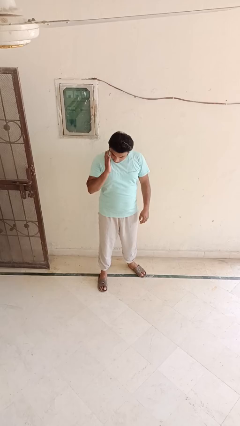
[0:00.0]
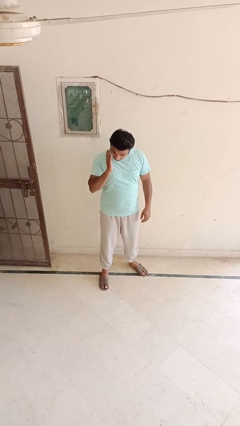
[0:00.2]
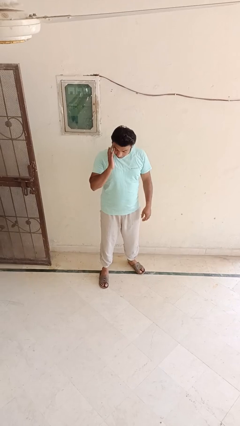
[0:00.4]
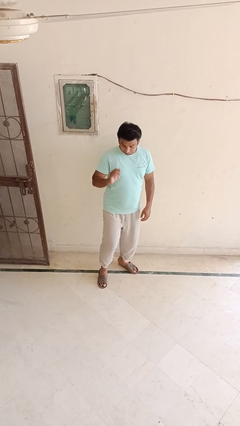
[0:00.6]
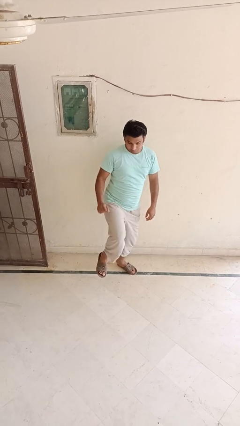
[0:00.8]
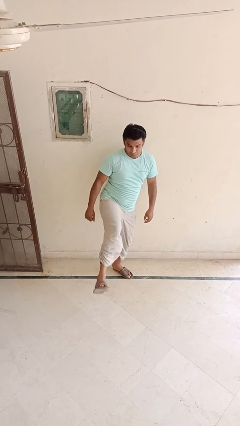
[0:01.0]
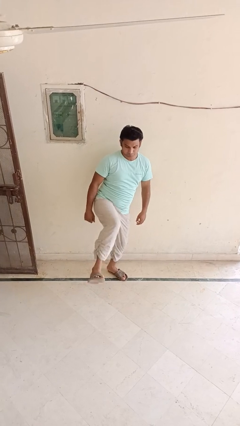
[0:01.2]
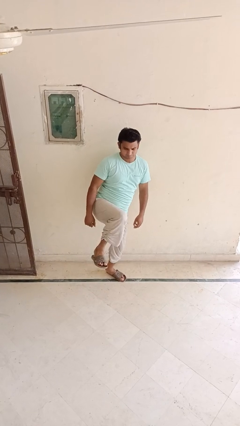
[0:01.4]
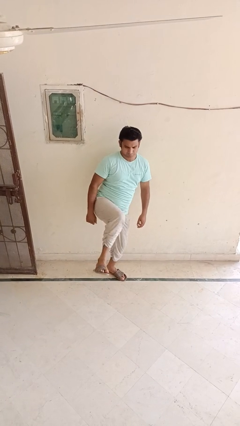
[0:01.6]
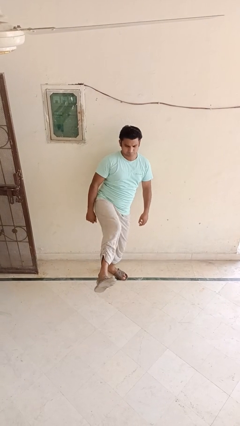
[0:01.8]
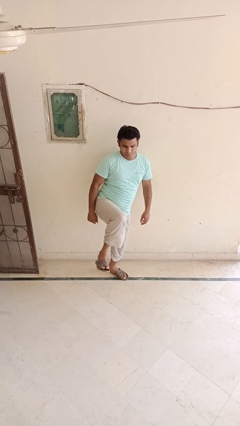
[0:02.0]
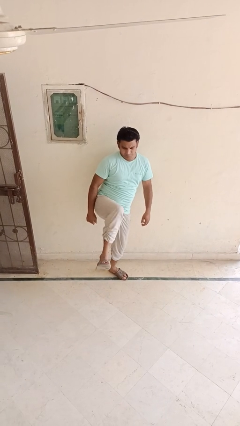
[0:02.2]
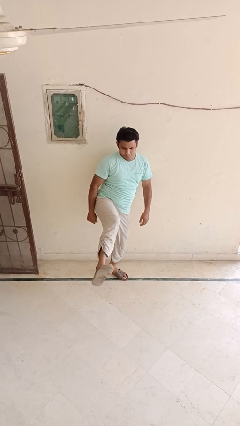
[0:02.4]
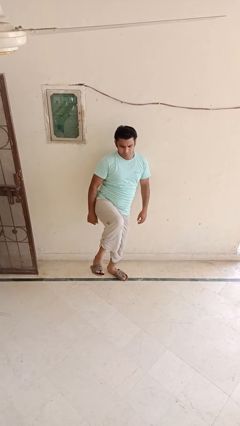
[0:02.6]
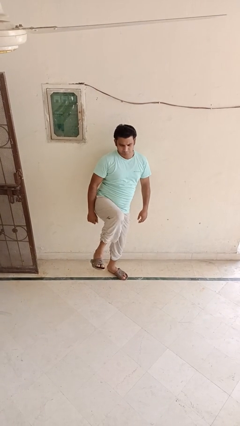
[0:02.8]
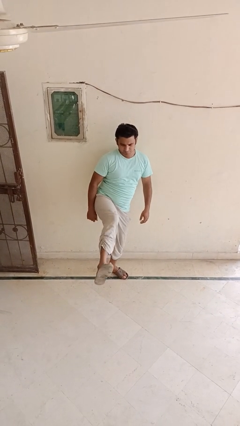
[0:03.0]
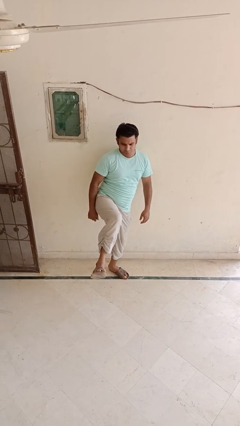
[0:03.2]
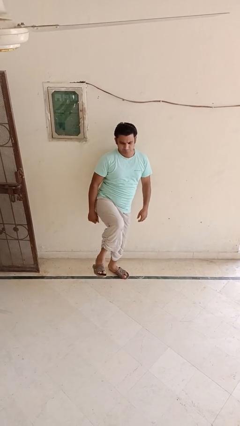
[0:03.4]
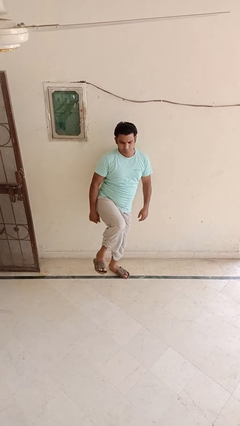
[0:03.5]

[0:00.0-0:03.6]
person karate kicks

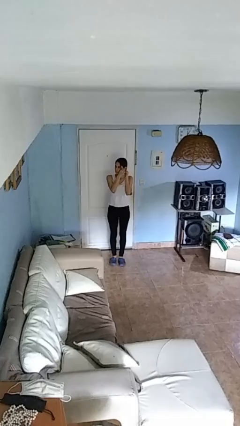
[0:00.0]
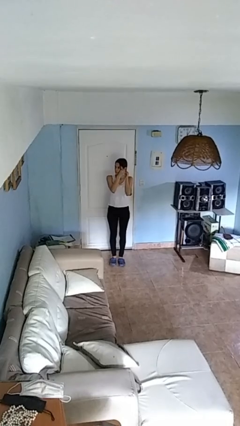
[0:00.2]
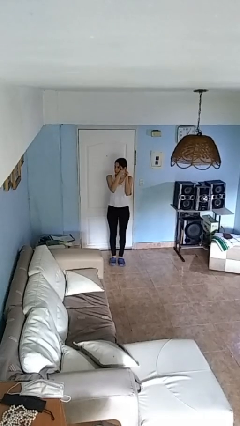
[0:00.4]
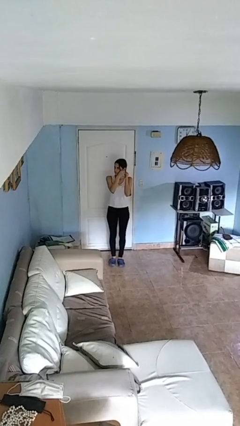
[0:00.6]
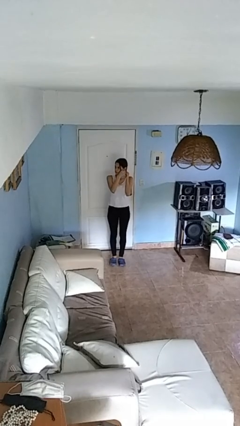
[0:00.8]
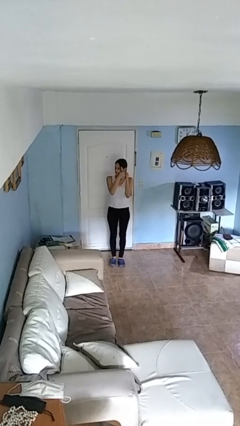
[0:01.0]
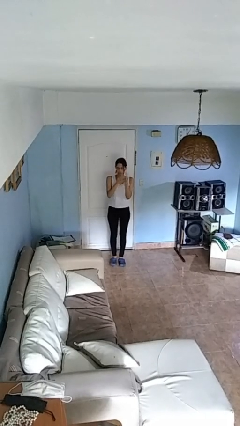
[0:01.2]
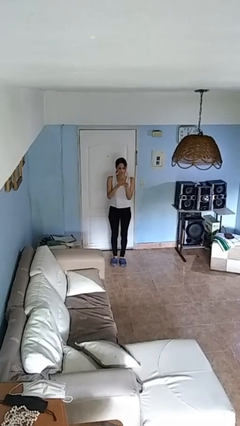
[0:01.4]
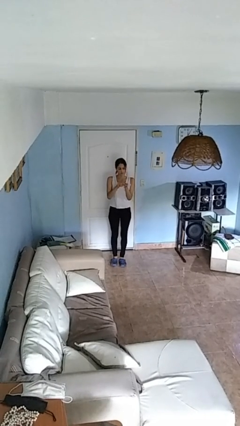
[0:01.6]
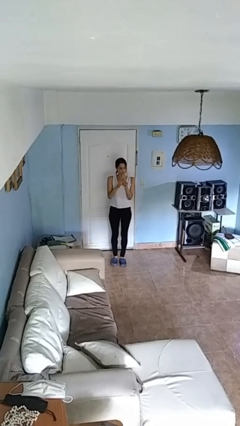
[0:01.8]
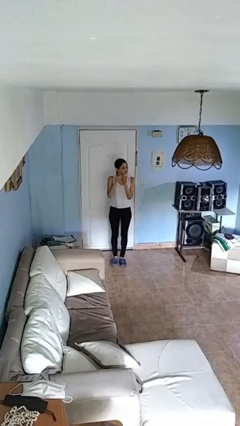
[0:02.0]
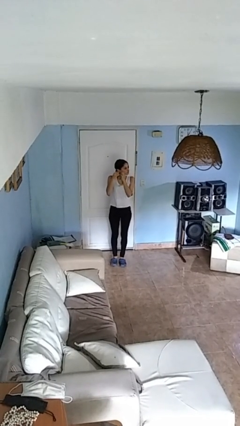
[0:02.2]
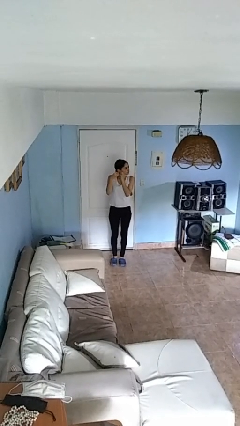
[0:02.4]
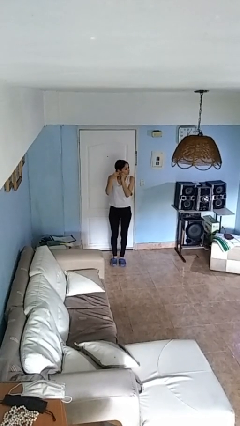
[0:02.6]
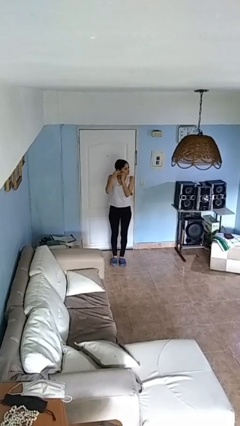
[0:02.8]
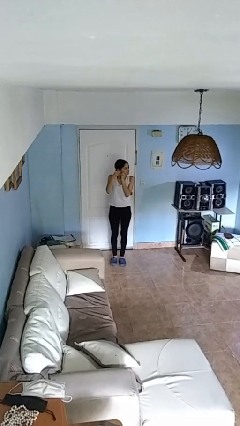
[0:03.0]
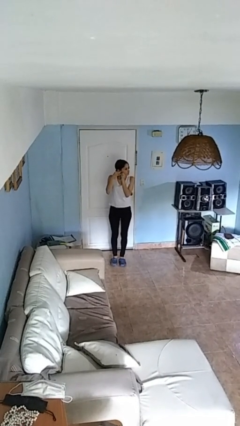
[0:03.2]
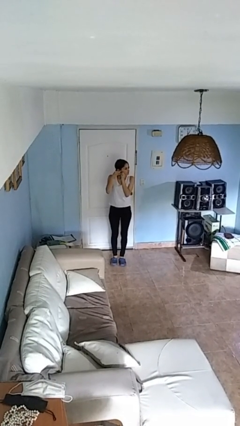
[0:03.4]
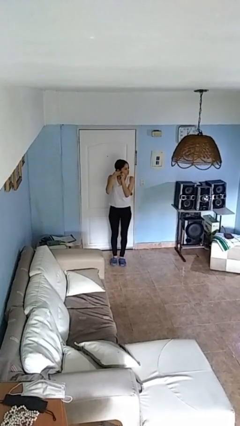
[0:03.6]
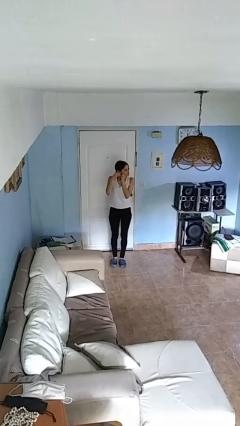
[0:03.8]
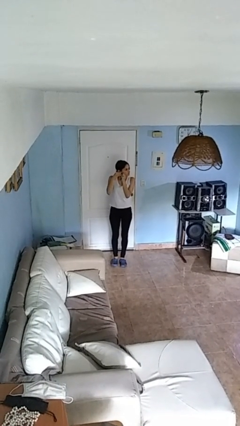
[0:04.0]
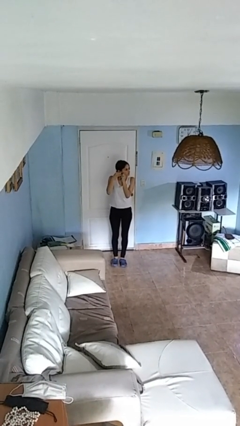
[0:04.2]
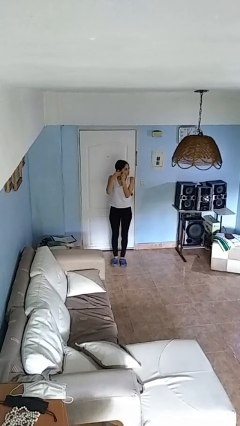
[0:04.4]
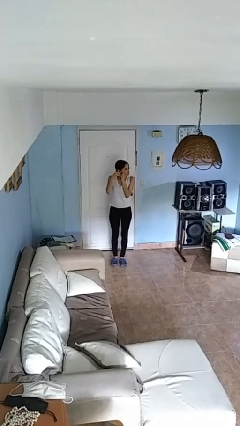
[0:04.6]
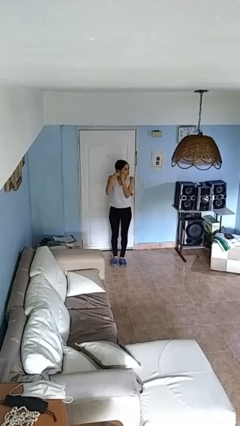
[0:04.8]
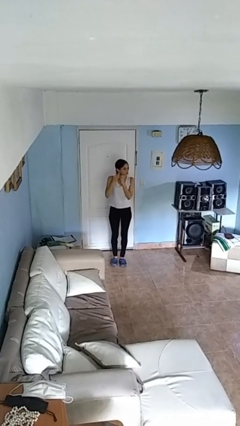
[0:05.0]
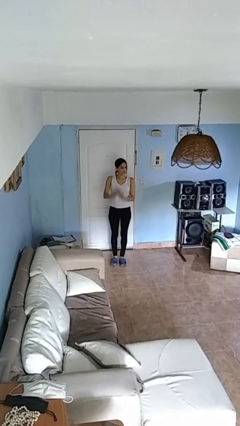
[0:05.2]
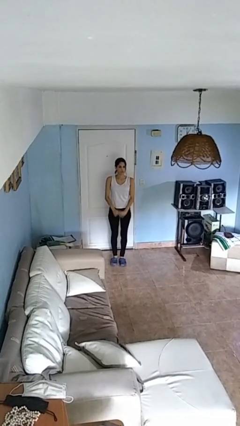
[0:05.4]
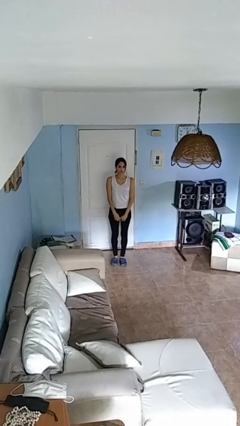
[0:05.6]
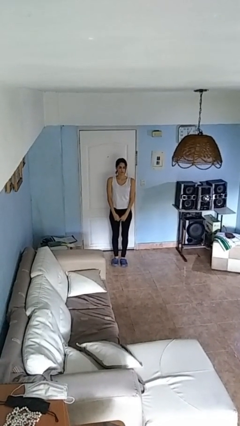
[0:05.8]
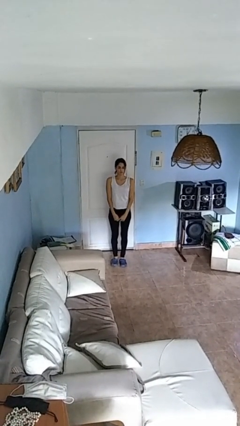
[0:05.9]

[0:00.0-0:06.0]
person puts on earrings

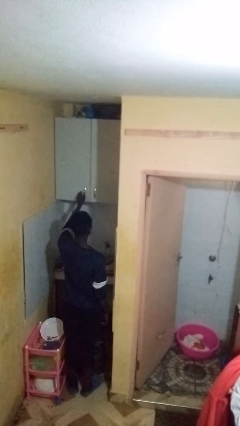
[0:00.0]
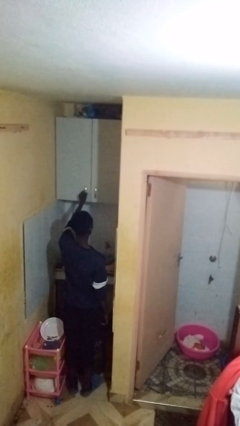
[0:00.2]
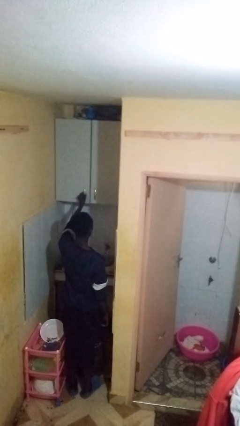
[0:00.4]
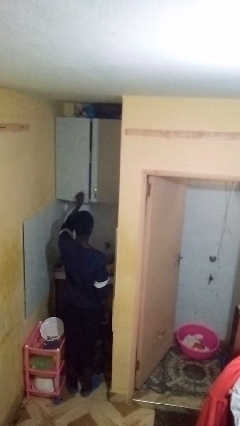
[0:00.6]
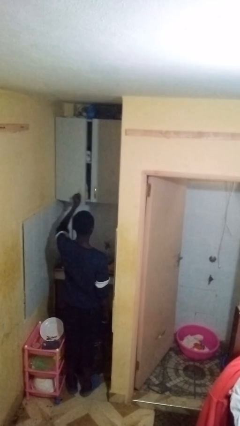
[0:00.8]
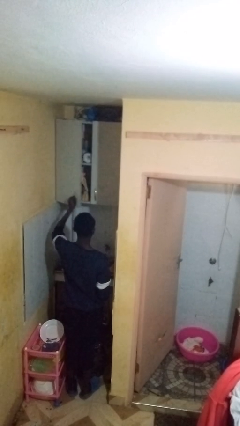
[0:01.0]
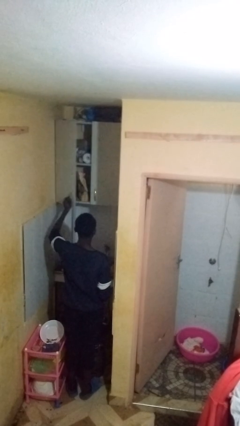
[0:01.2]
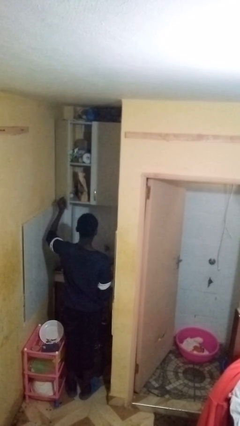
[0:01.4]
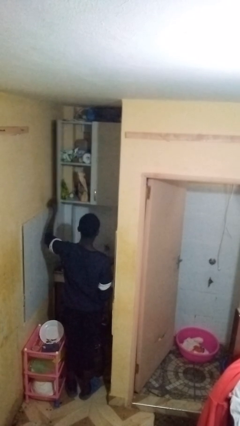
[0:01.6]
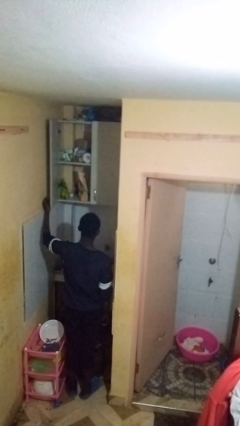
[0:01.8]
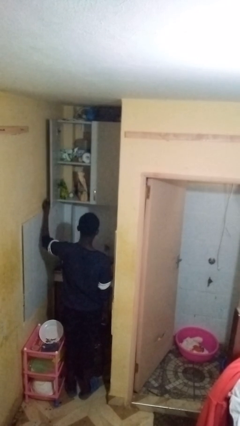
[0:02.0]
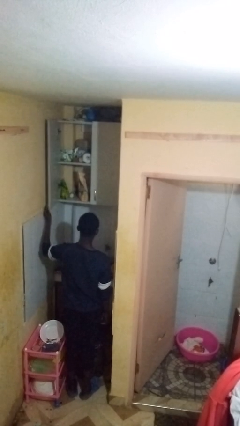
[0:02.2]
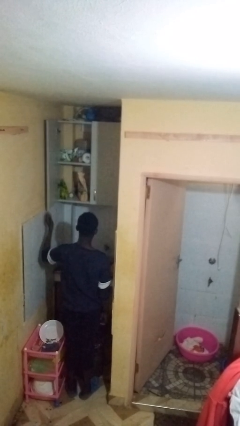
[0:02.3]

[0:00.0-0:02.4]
person opens cabinet

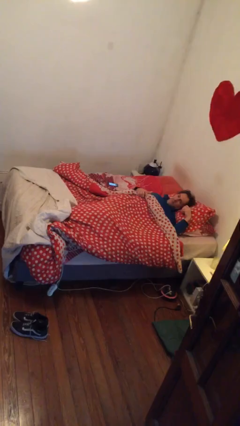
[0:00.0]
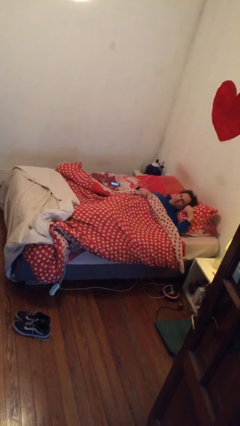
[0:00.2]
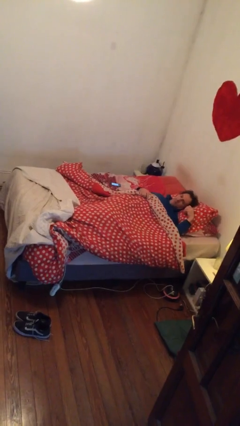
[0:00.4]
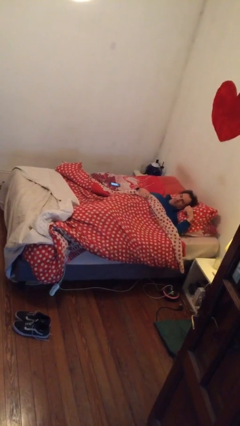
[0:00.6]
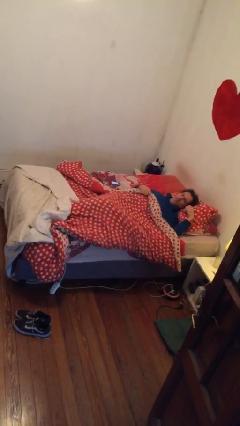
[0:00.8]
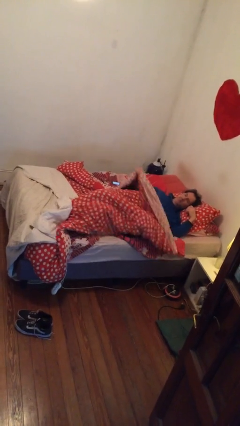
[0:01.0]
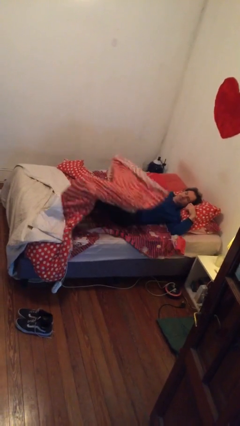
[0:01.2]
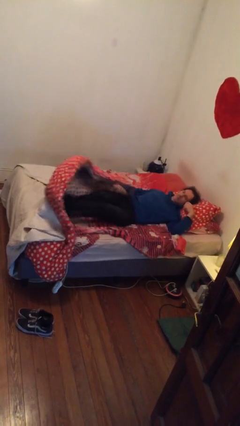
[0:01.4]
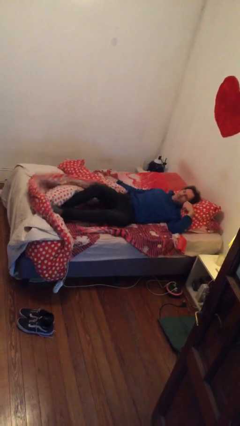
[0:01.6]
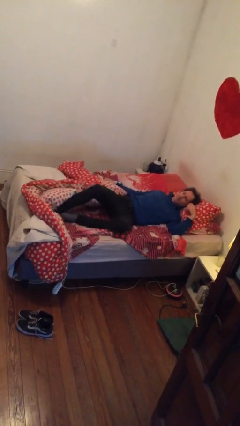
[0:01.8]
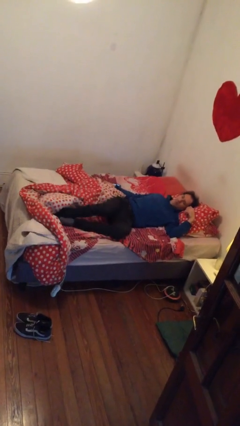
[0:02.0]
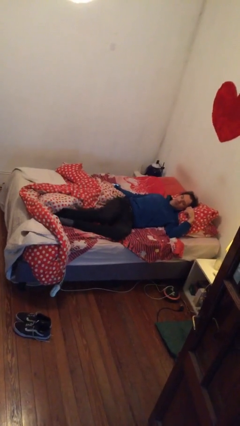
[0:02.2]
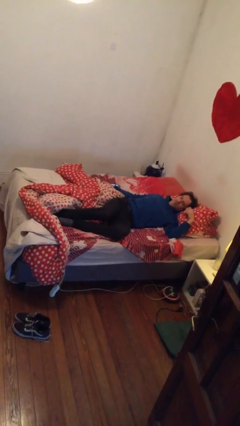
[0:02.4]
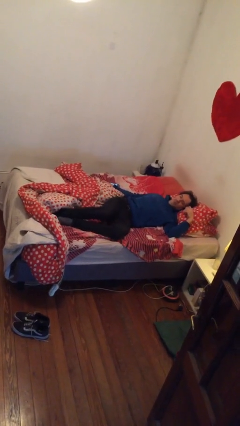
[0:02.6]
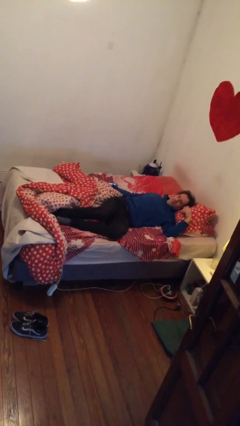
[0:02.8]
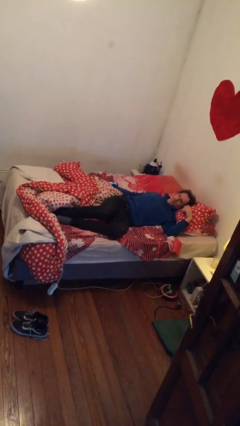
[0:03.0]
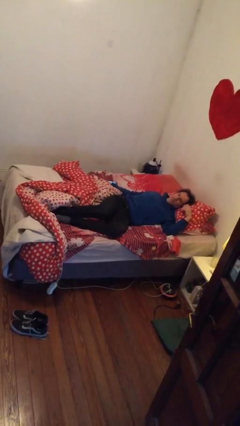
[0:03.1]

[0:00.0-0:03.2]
person uncovers with bedsheets

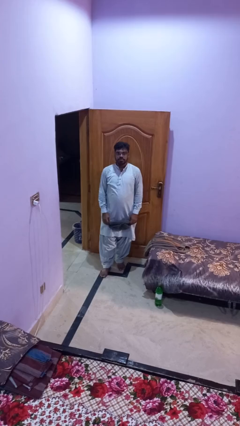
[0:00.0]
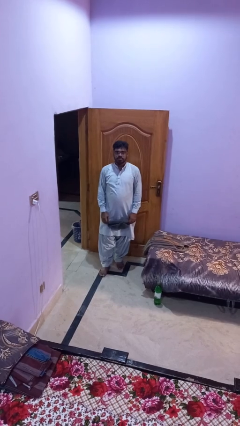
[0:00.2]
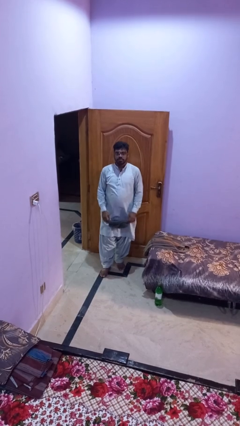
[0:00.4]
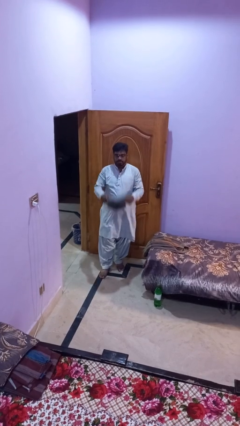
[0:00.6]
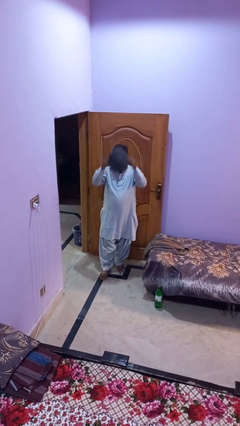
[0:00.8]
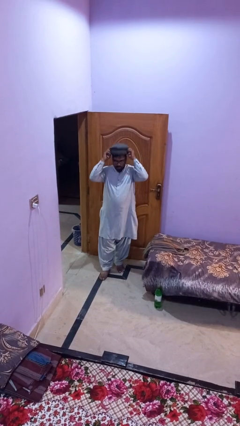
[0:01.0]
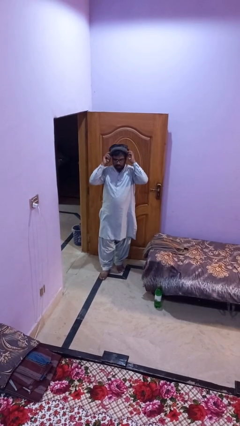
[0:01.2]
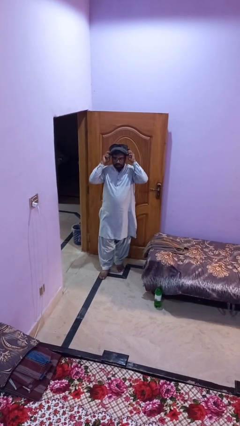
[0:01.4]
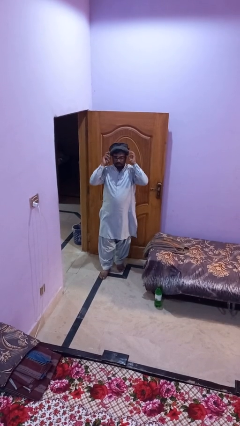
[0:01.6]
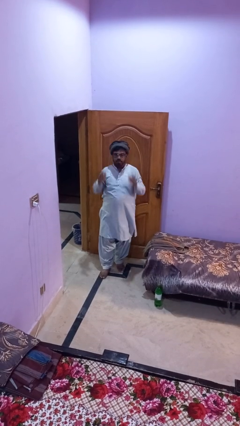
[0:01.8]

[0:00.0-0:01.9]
person puts on hat

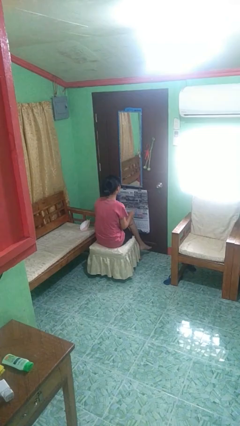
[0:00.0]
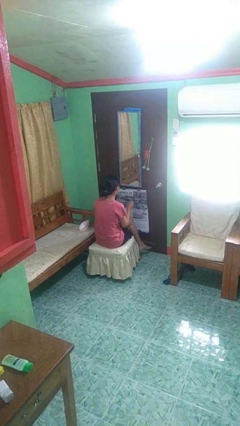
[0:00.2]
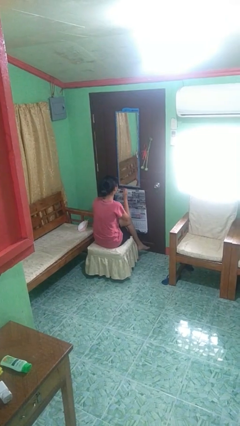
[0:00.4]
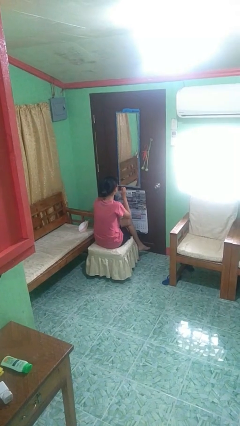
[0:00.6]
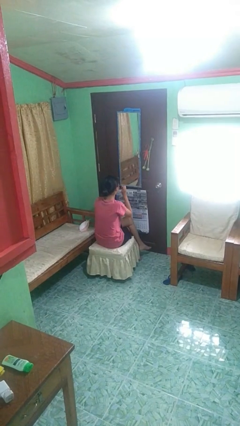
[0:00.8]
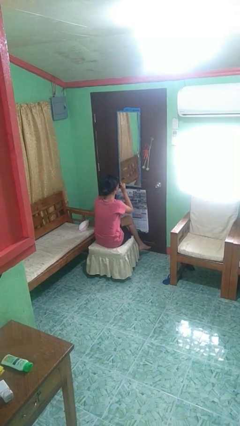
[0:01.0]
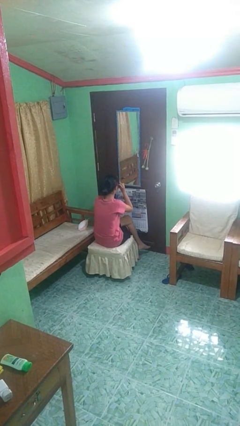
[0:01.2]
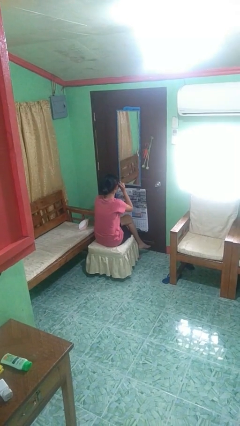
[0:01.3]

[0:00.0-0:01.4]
person puts on sunglasses
